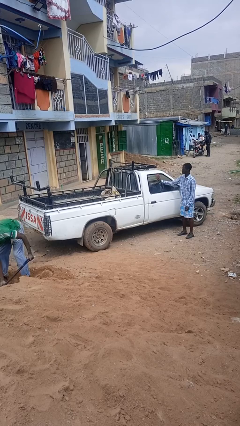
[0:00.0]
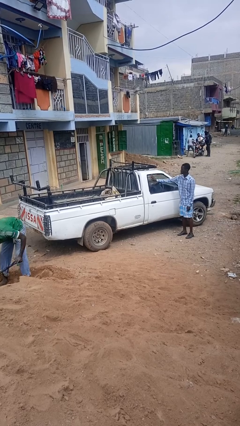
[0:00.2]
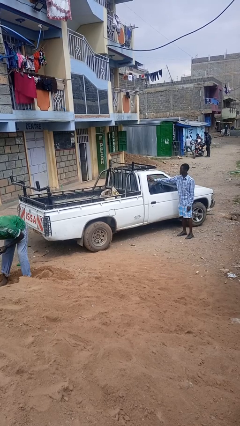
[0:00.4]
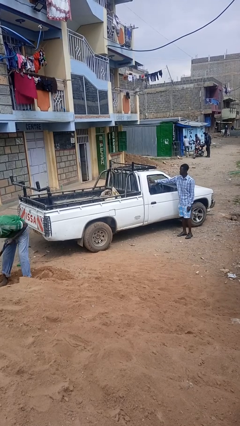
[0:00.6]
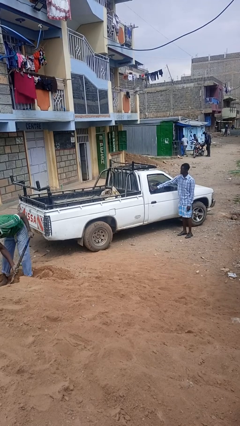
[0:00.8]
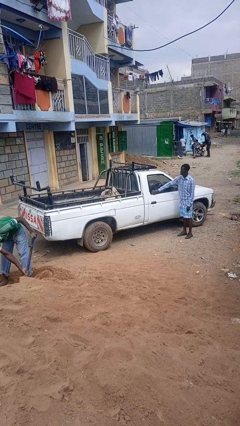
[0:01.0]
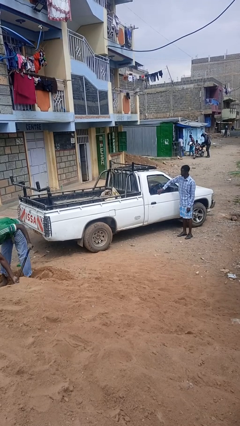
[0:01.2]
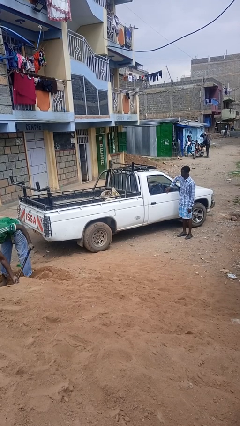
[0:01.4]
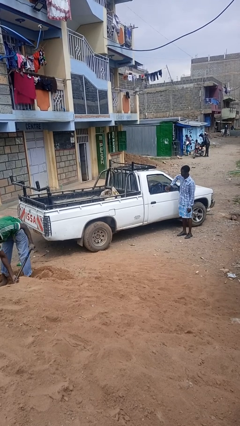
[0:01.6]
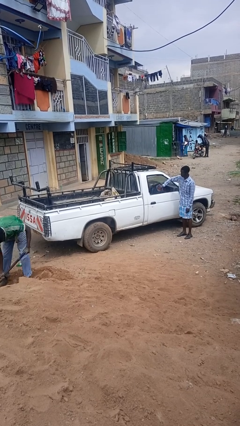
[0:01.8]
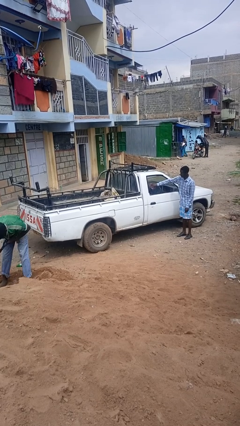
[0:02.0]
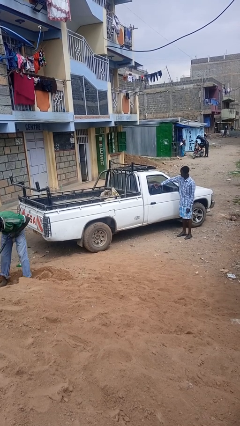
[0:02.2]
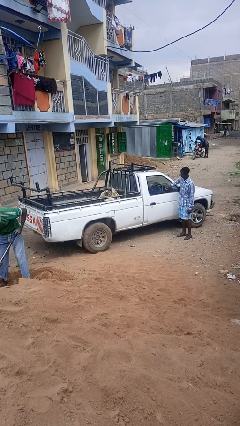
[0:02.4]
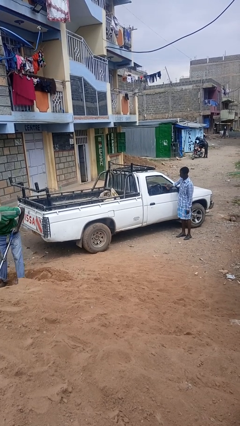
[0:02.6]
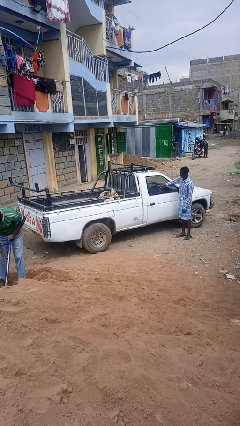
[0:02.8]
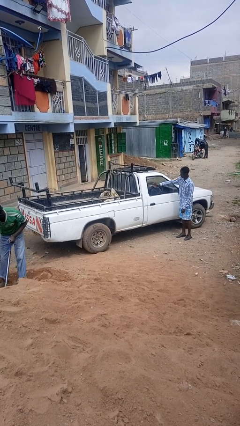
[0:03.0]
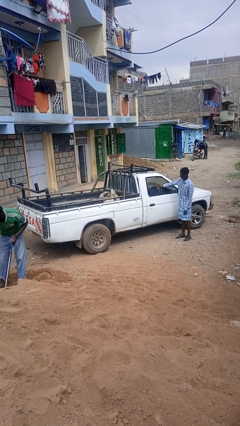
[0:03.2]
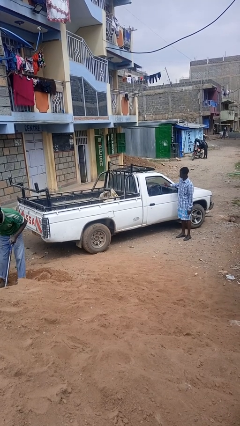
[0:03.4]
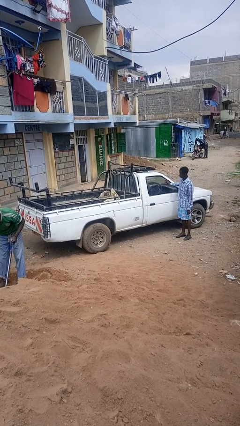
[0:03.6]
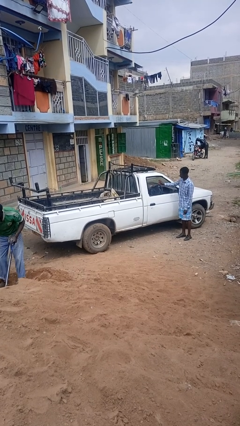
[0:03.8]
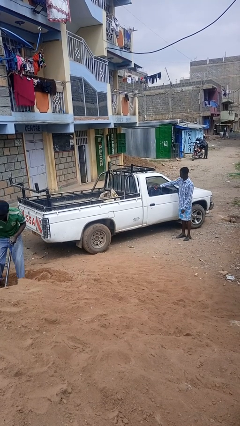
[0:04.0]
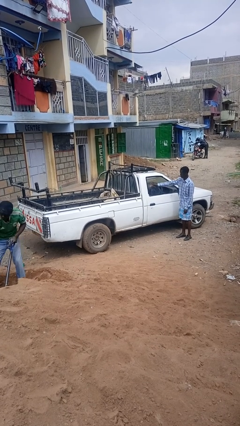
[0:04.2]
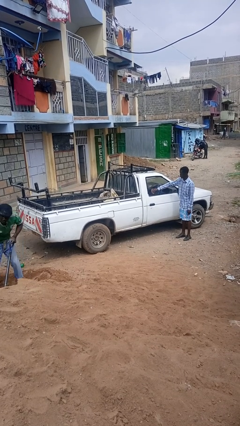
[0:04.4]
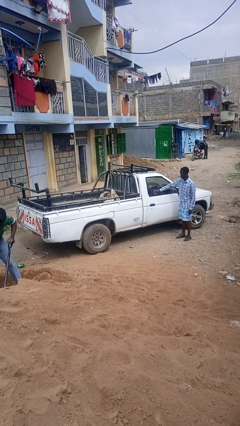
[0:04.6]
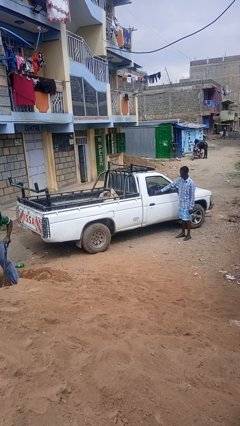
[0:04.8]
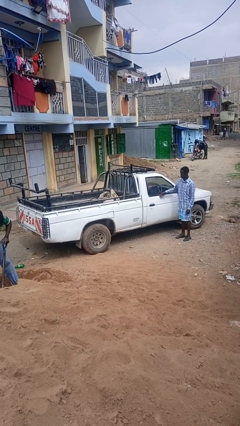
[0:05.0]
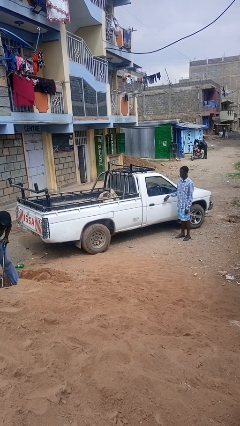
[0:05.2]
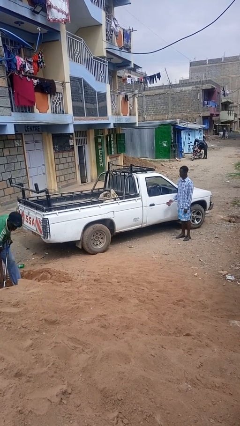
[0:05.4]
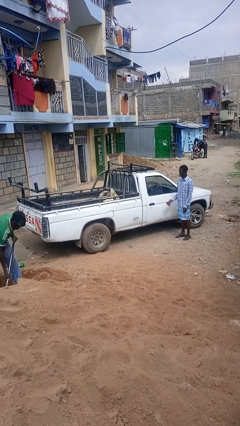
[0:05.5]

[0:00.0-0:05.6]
person polishes car with rag

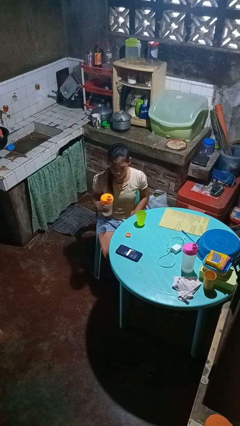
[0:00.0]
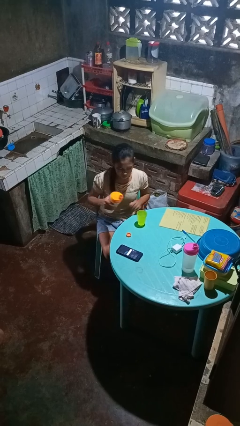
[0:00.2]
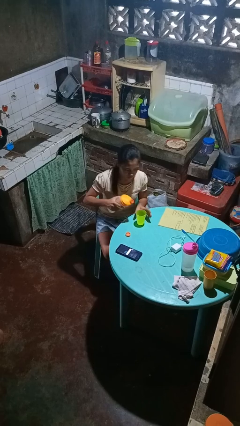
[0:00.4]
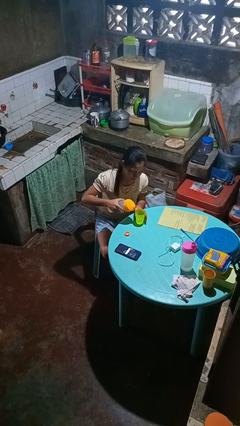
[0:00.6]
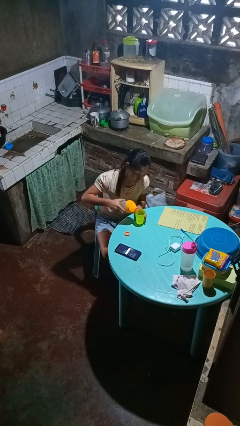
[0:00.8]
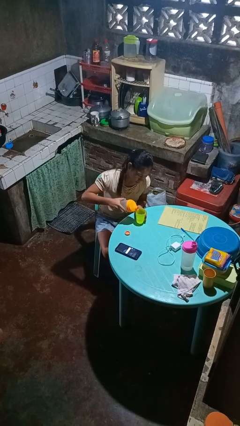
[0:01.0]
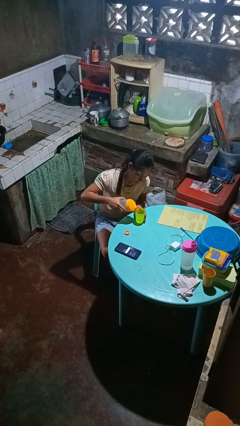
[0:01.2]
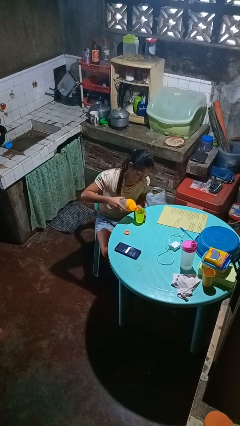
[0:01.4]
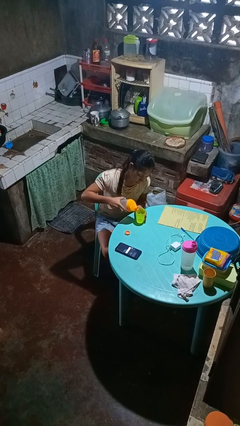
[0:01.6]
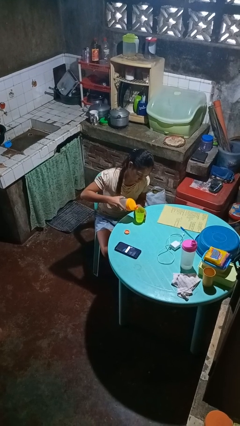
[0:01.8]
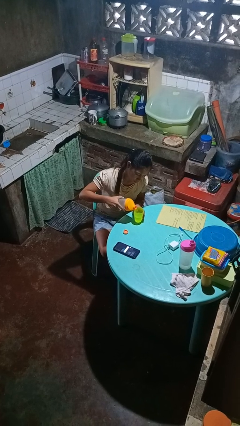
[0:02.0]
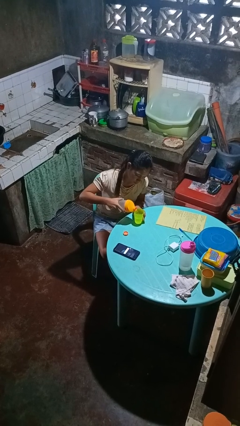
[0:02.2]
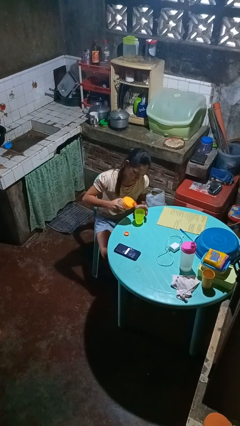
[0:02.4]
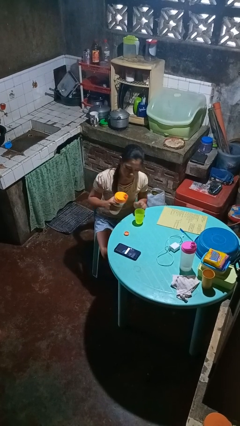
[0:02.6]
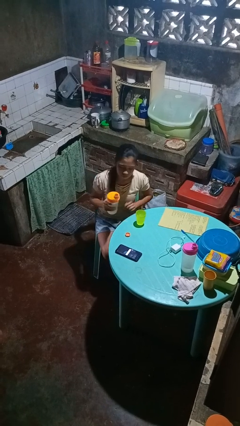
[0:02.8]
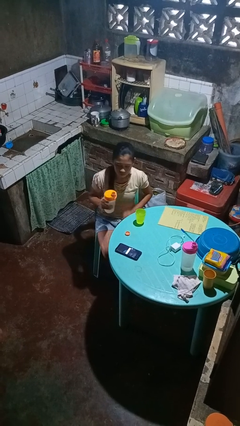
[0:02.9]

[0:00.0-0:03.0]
person pours liquid into cup

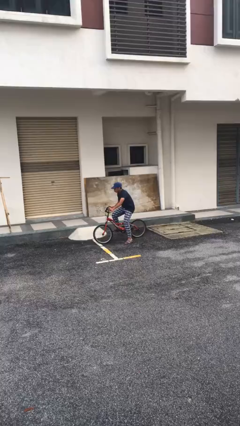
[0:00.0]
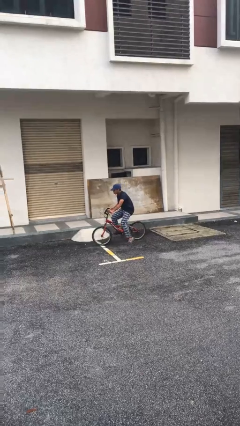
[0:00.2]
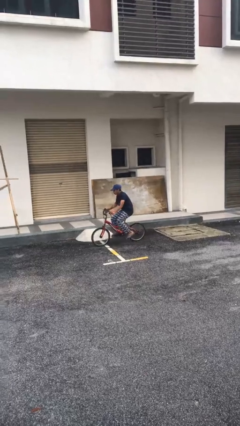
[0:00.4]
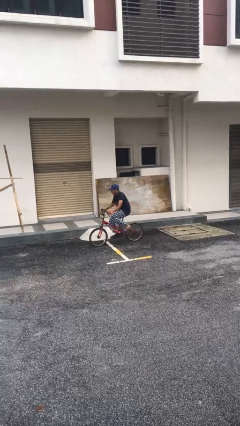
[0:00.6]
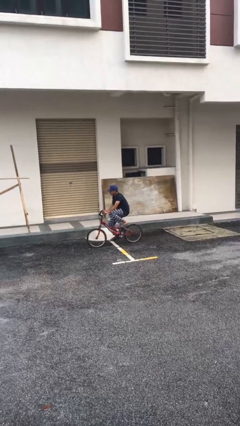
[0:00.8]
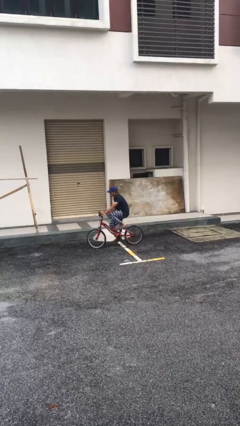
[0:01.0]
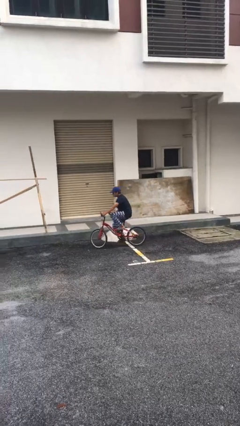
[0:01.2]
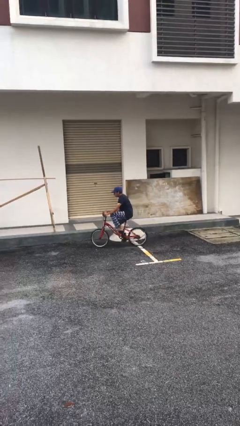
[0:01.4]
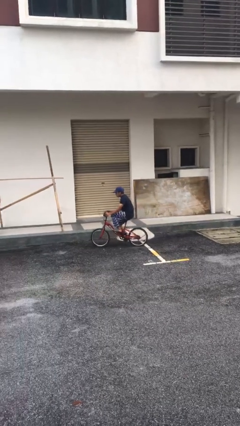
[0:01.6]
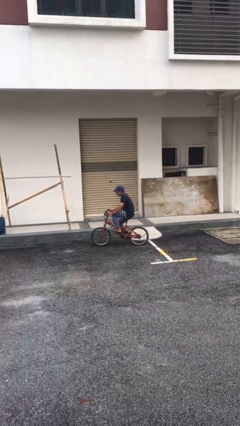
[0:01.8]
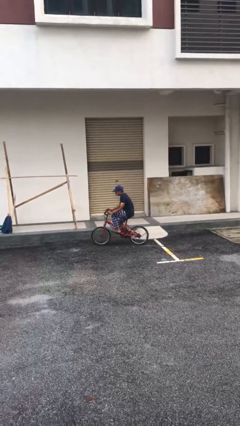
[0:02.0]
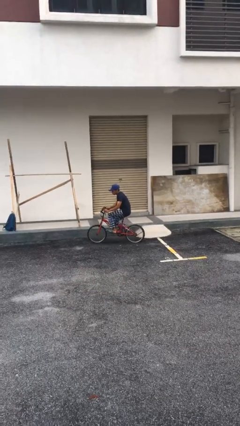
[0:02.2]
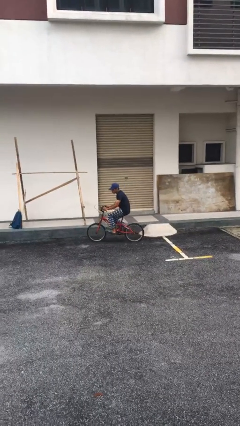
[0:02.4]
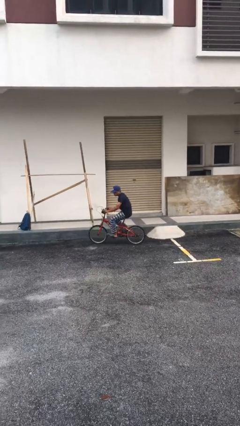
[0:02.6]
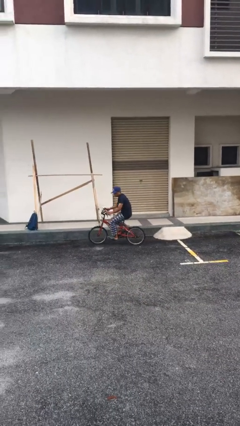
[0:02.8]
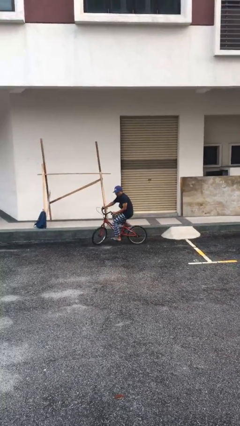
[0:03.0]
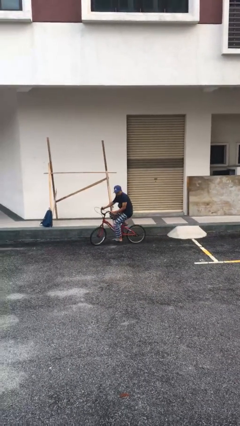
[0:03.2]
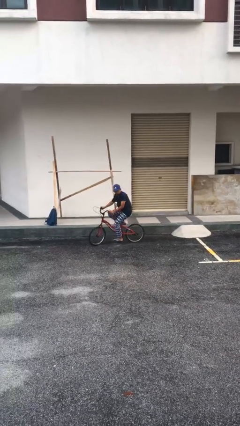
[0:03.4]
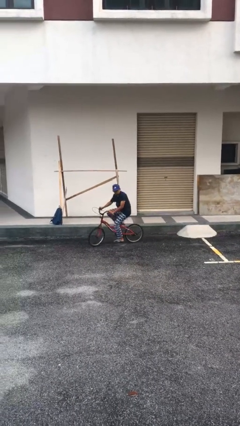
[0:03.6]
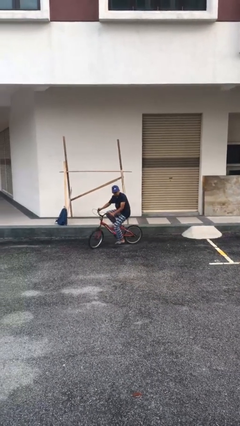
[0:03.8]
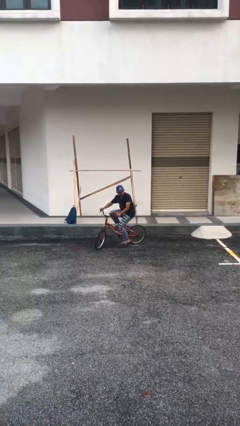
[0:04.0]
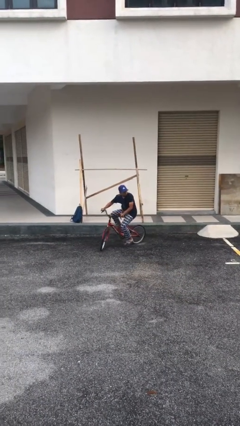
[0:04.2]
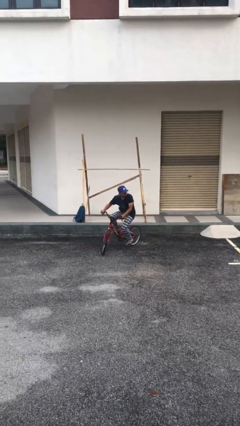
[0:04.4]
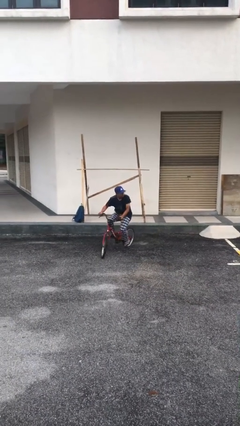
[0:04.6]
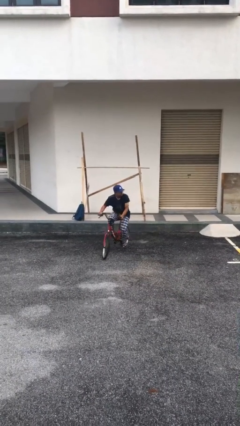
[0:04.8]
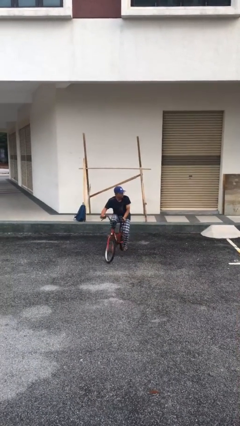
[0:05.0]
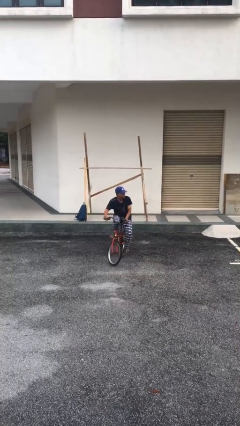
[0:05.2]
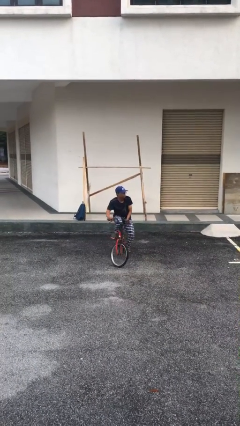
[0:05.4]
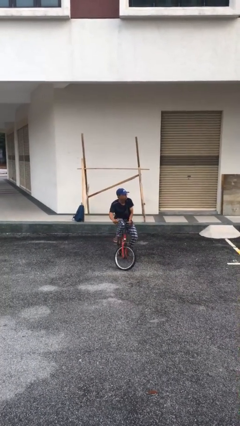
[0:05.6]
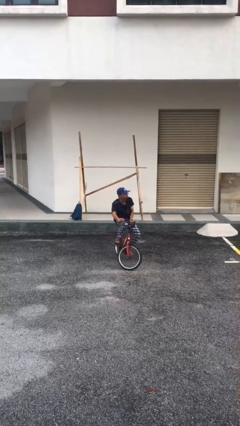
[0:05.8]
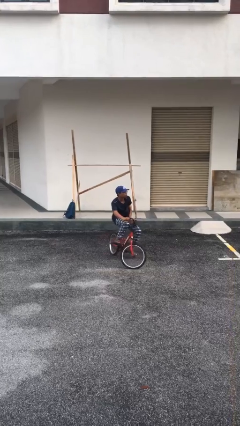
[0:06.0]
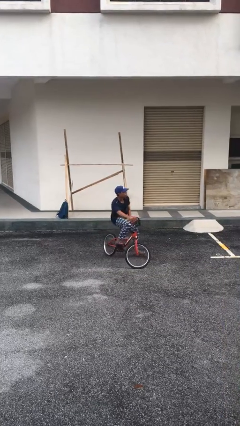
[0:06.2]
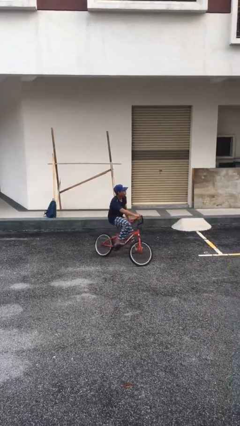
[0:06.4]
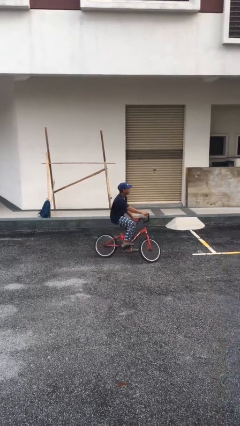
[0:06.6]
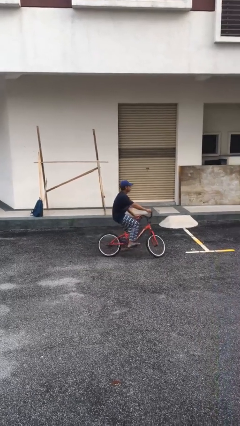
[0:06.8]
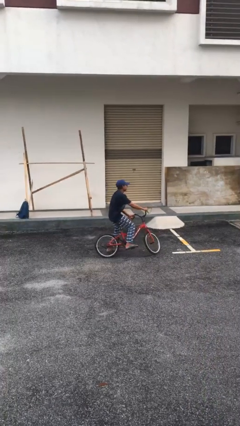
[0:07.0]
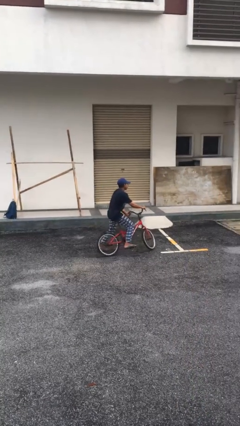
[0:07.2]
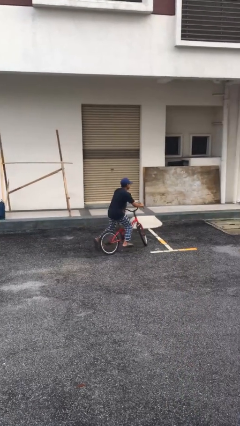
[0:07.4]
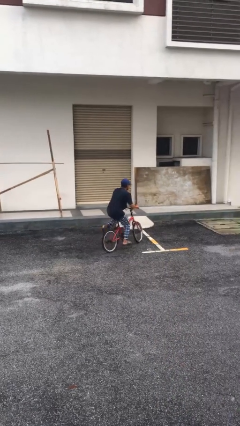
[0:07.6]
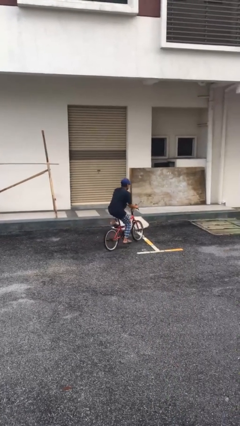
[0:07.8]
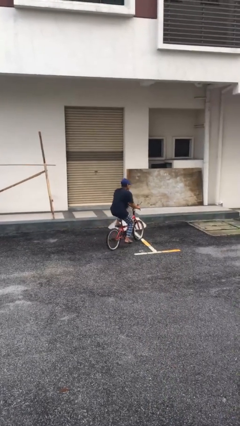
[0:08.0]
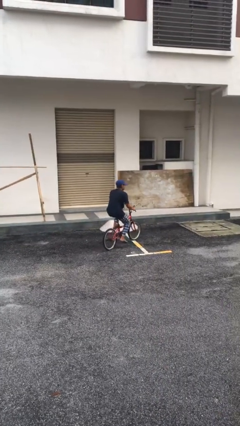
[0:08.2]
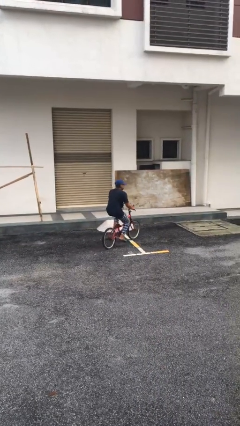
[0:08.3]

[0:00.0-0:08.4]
person rides bicycle

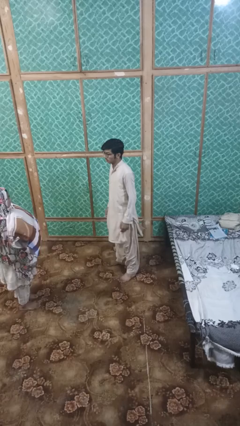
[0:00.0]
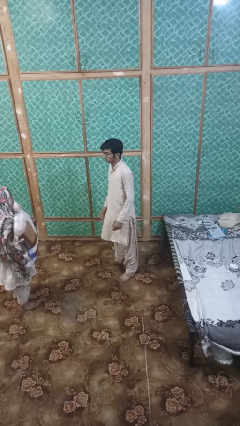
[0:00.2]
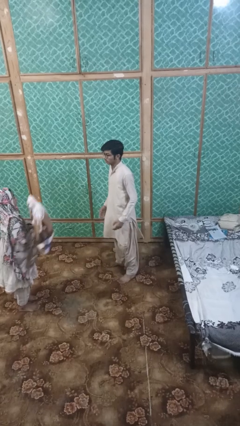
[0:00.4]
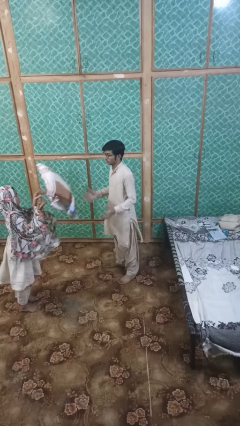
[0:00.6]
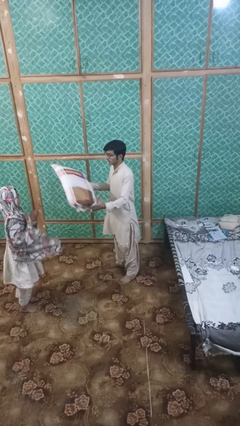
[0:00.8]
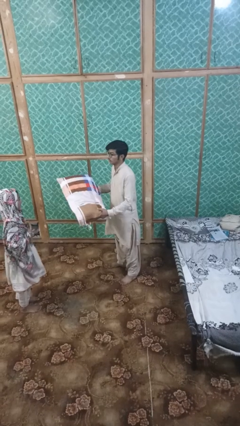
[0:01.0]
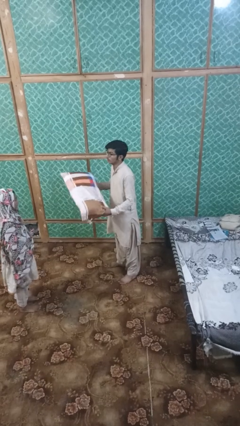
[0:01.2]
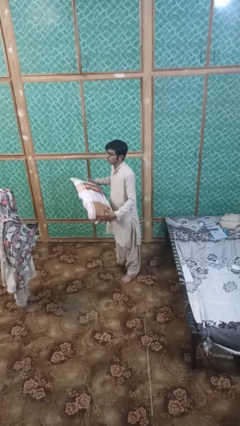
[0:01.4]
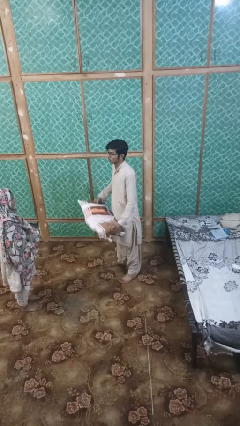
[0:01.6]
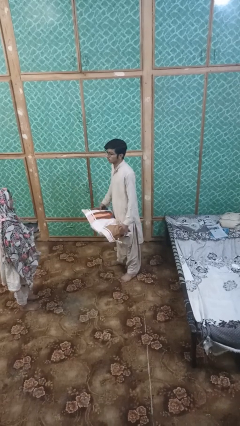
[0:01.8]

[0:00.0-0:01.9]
person catches object from person
